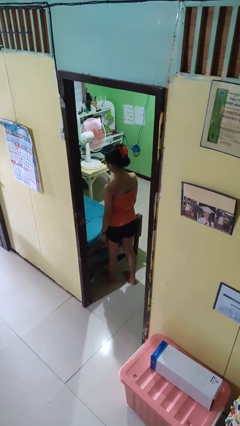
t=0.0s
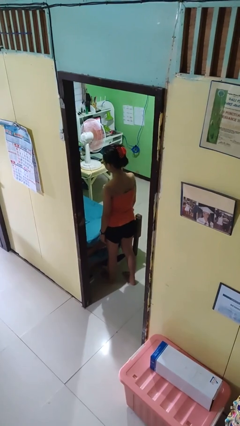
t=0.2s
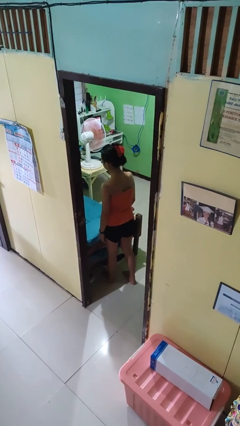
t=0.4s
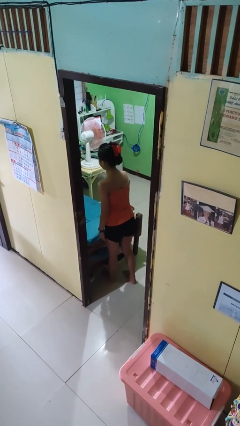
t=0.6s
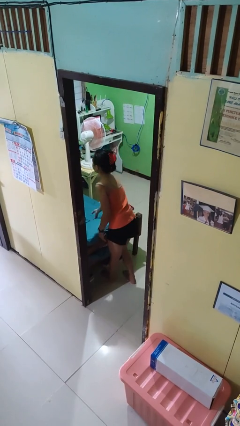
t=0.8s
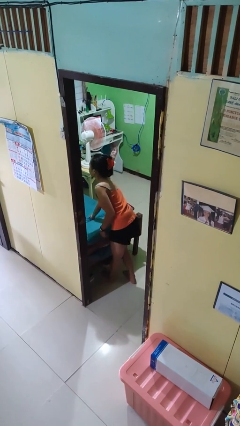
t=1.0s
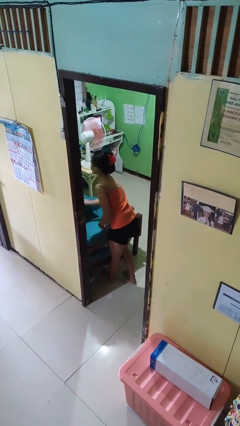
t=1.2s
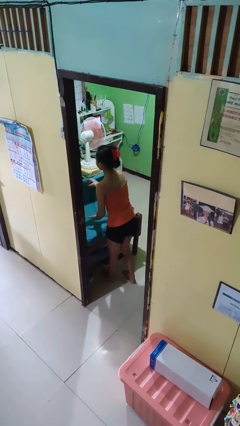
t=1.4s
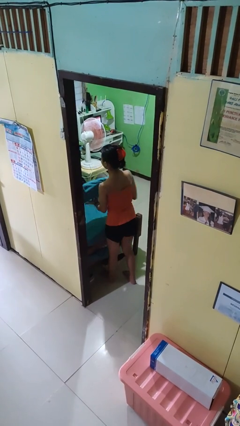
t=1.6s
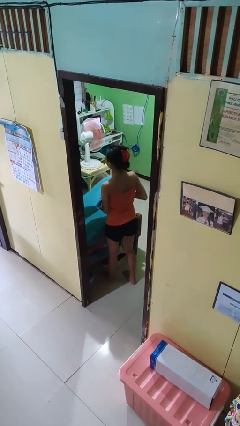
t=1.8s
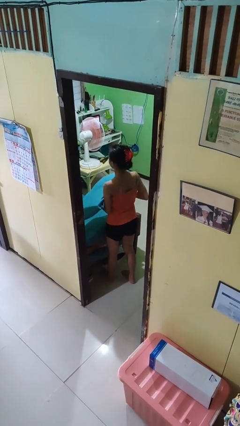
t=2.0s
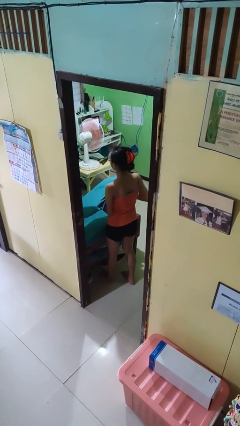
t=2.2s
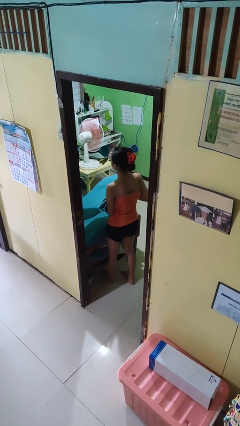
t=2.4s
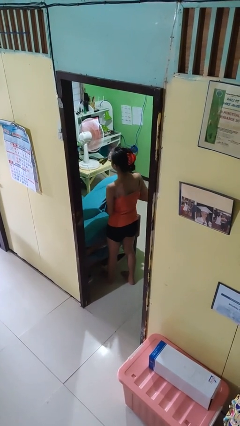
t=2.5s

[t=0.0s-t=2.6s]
person picks up object from bed

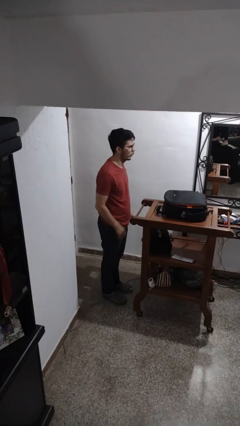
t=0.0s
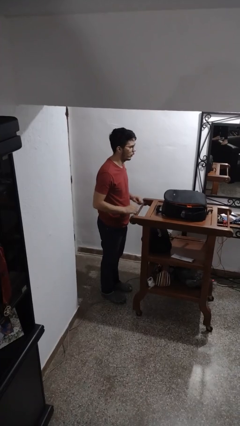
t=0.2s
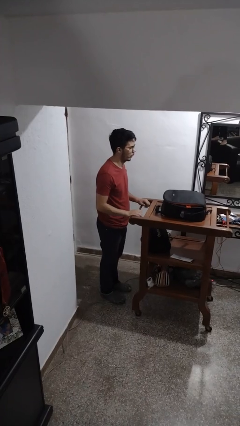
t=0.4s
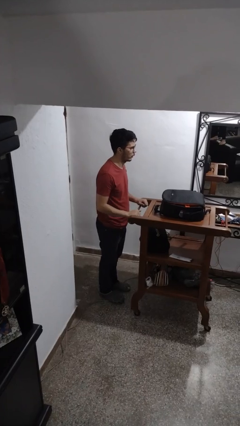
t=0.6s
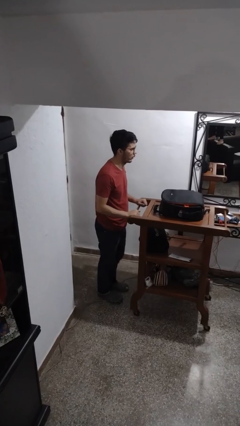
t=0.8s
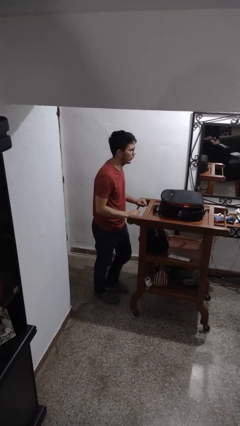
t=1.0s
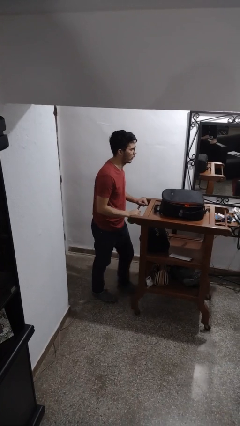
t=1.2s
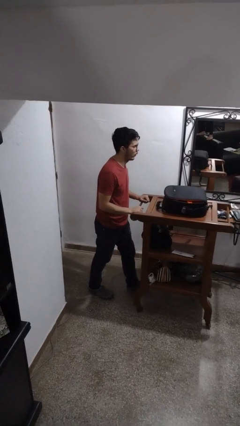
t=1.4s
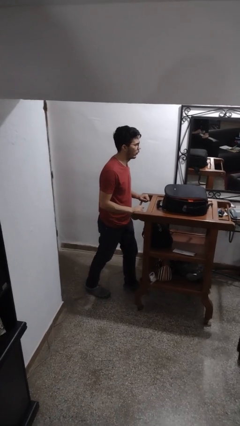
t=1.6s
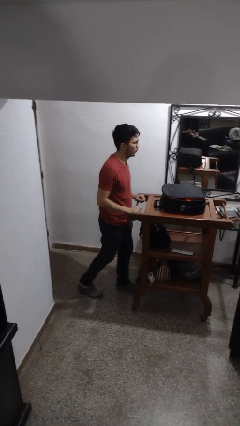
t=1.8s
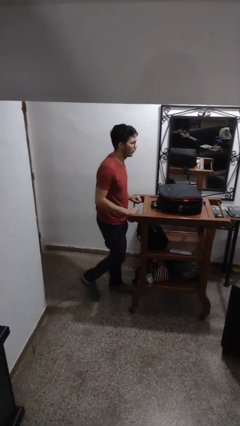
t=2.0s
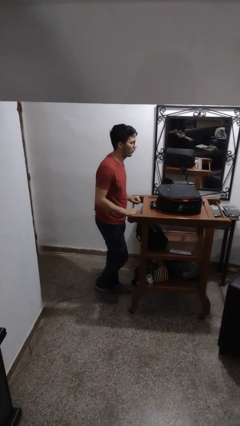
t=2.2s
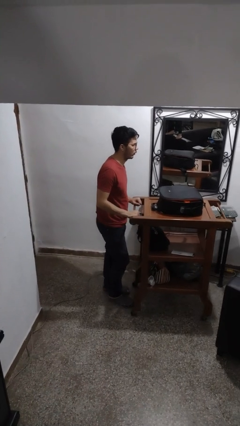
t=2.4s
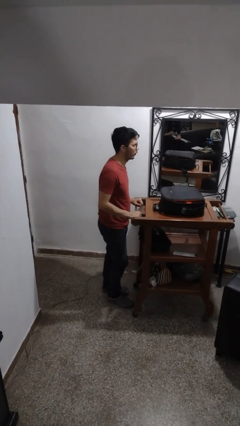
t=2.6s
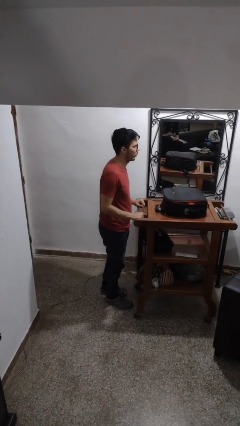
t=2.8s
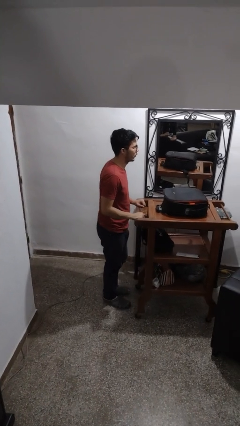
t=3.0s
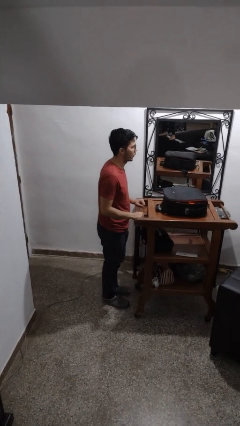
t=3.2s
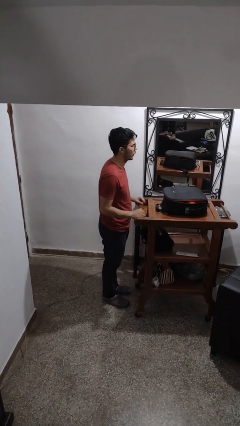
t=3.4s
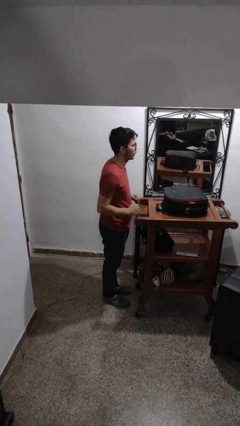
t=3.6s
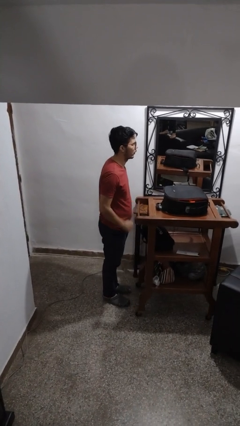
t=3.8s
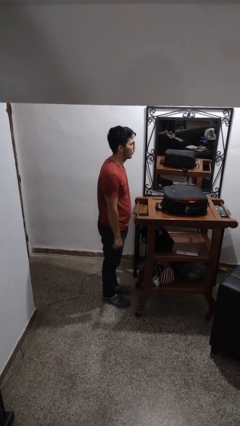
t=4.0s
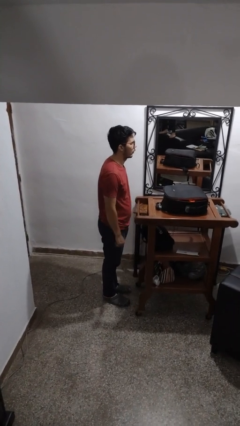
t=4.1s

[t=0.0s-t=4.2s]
person pushes wheeled cart

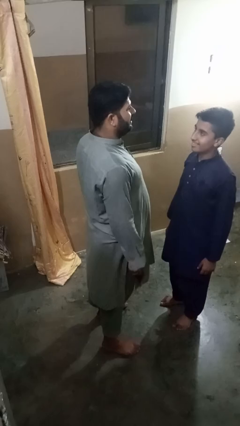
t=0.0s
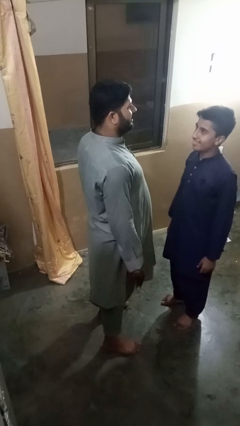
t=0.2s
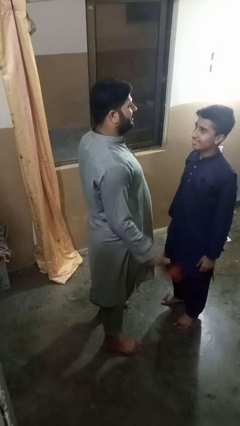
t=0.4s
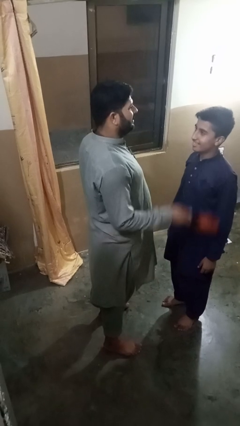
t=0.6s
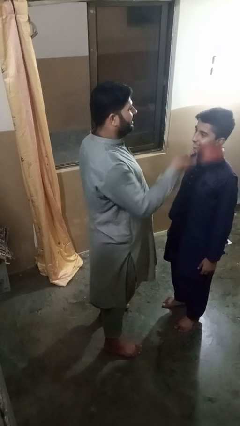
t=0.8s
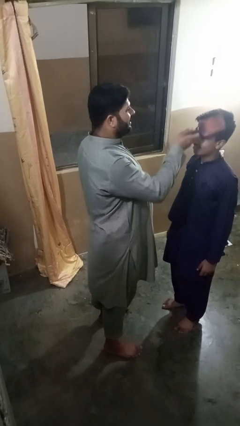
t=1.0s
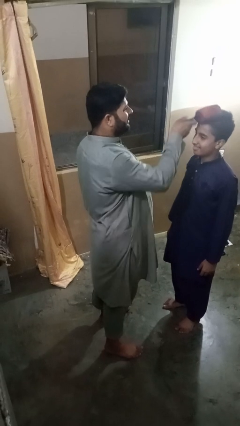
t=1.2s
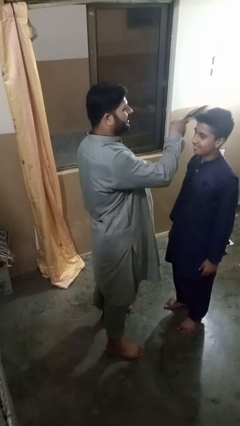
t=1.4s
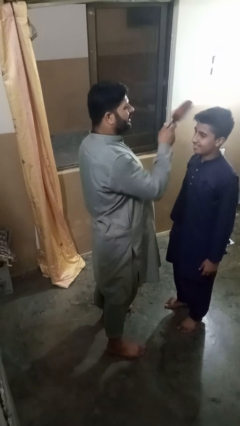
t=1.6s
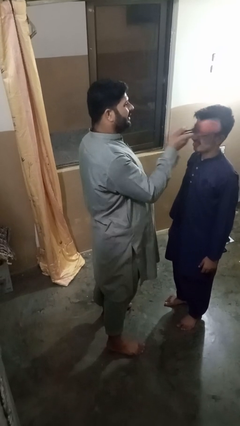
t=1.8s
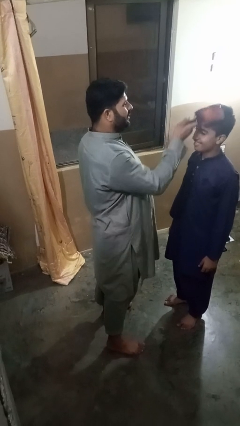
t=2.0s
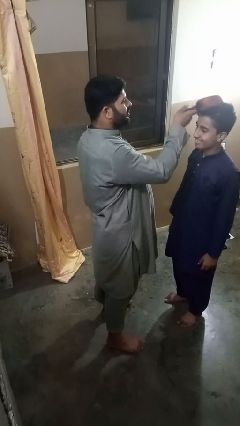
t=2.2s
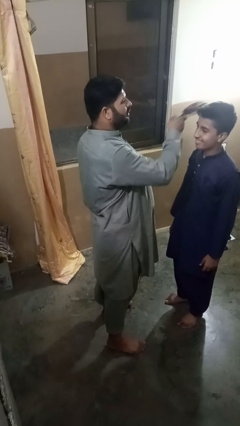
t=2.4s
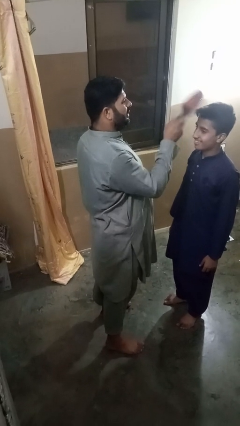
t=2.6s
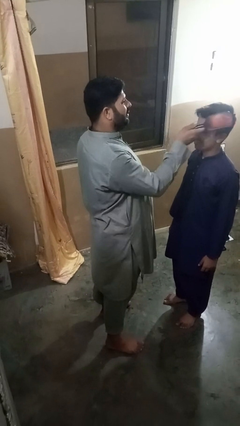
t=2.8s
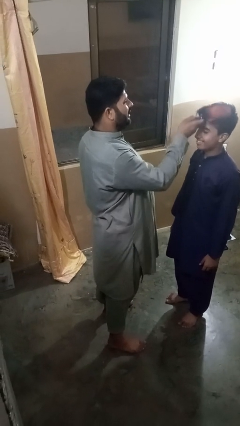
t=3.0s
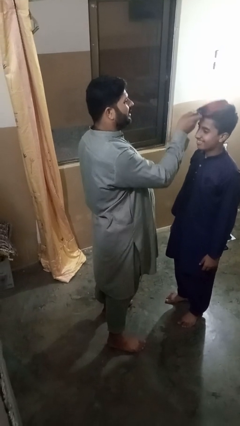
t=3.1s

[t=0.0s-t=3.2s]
person brushes hair of person

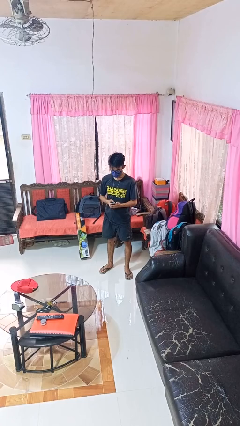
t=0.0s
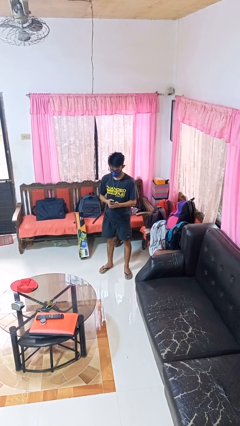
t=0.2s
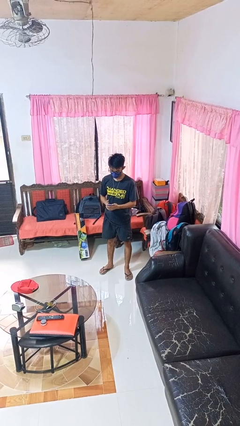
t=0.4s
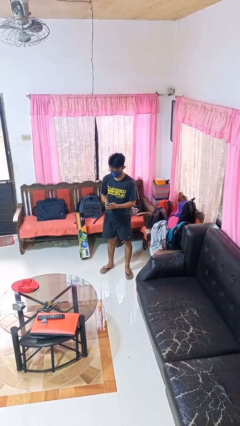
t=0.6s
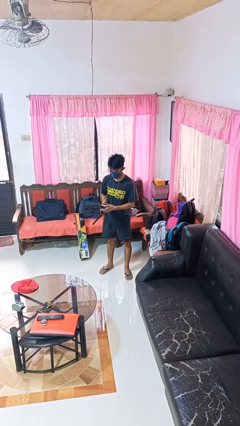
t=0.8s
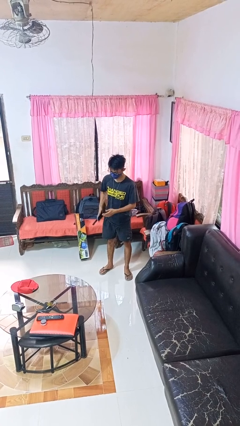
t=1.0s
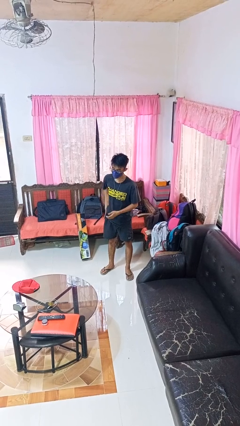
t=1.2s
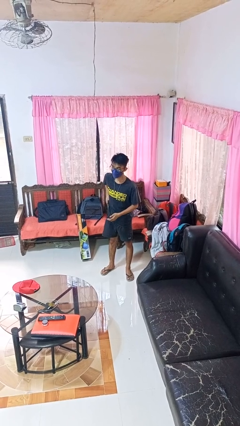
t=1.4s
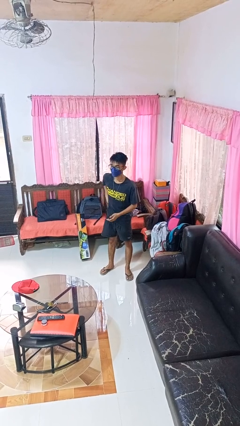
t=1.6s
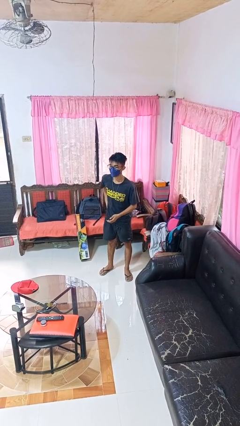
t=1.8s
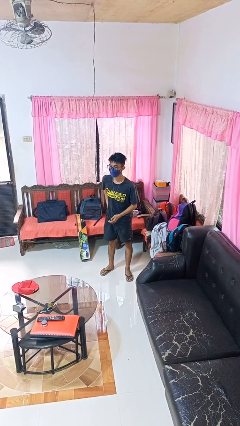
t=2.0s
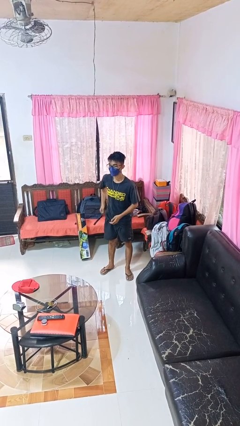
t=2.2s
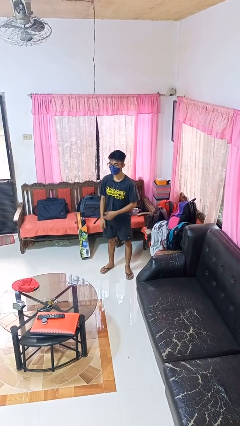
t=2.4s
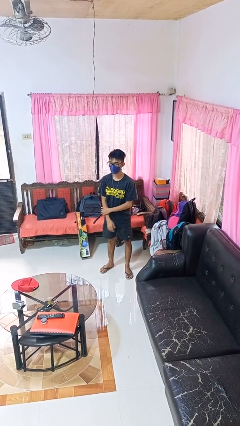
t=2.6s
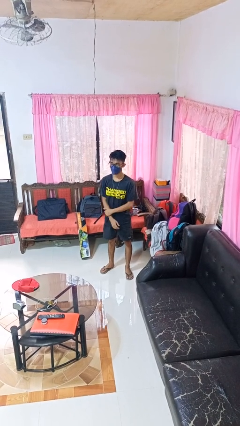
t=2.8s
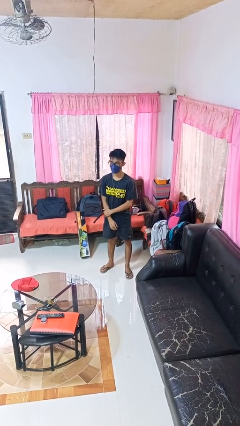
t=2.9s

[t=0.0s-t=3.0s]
person puts phone into pocket

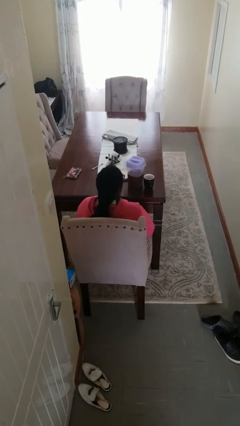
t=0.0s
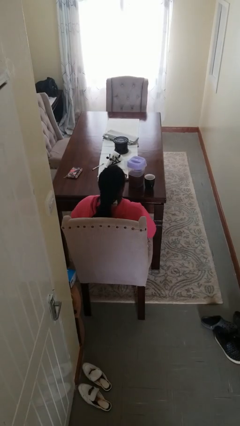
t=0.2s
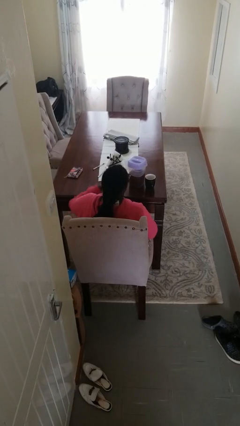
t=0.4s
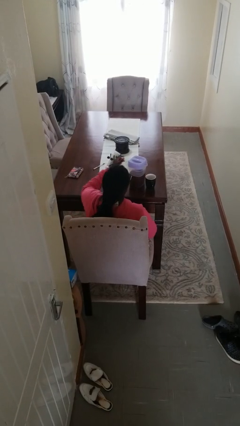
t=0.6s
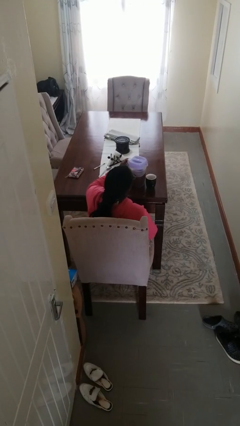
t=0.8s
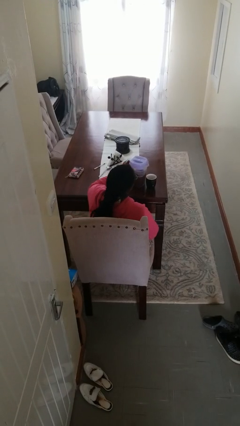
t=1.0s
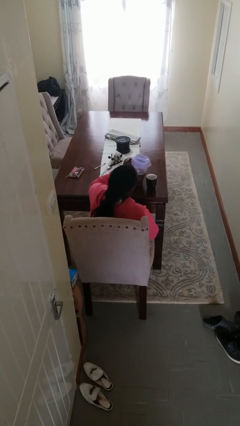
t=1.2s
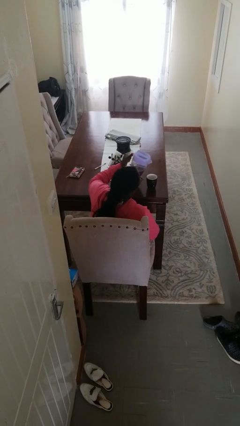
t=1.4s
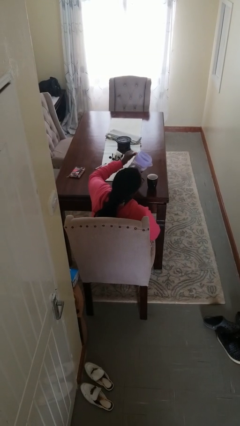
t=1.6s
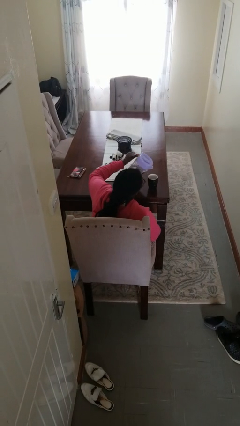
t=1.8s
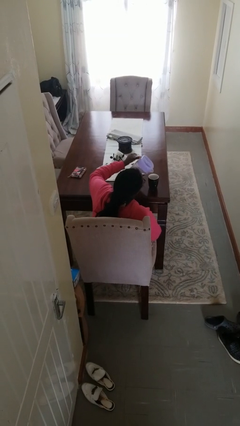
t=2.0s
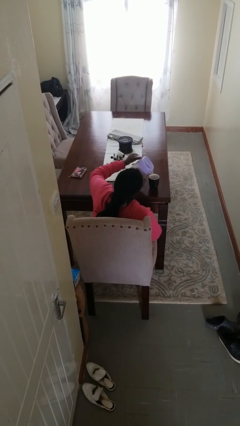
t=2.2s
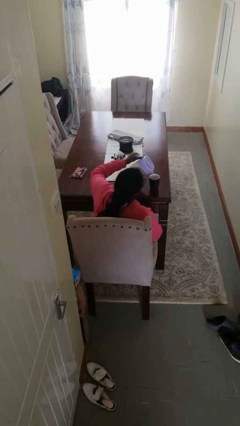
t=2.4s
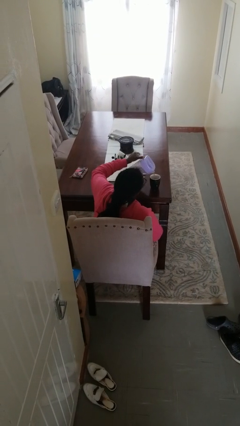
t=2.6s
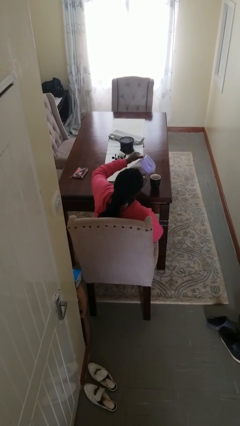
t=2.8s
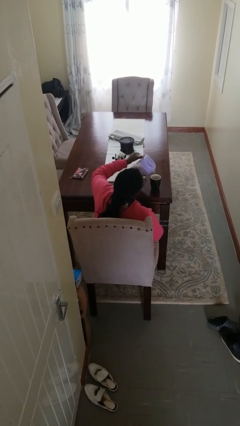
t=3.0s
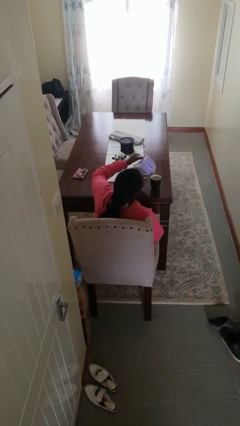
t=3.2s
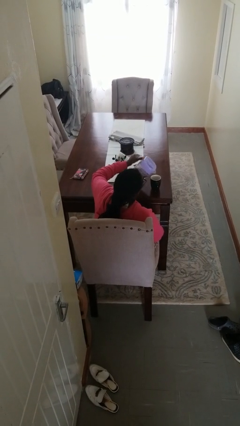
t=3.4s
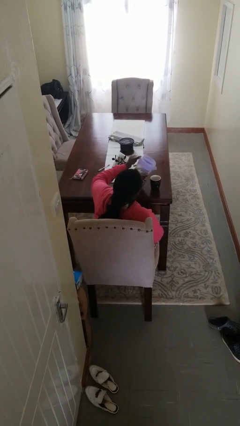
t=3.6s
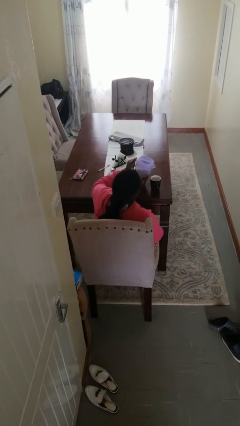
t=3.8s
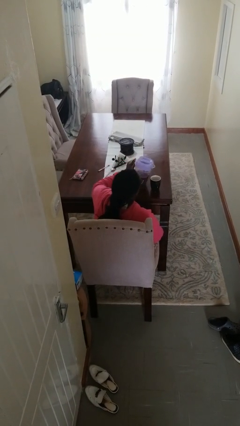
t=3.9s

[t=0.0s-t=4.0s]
person pours coffee into mug

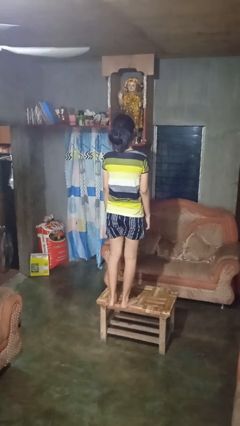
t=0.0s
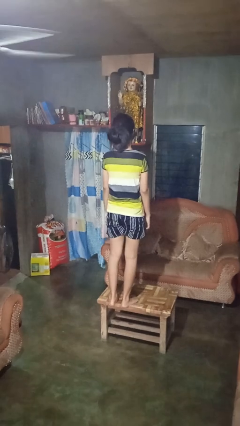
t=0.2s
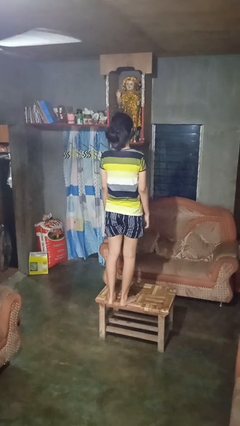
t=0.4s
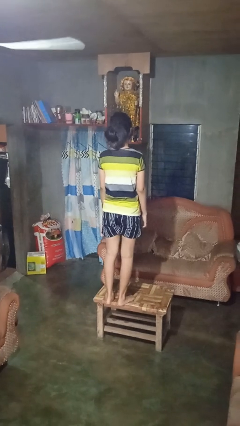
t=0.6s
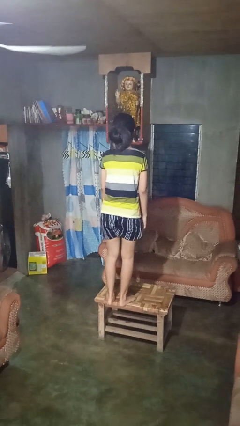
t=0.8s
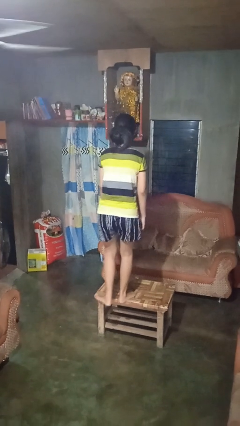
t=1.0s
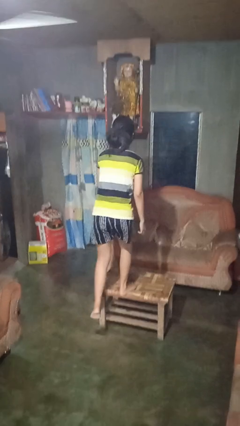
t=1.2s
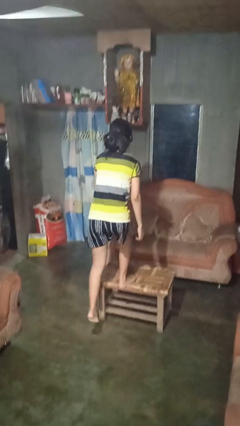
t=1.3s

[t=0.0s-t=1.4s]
person climbs off table
